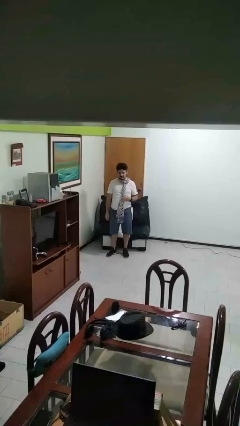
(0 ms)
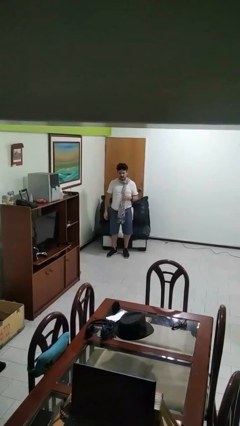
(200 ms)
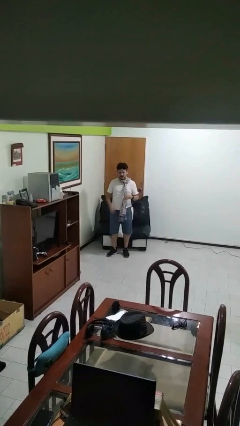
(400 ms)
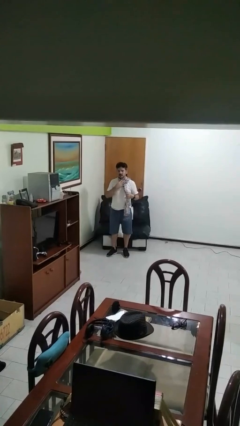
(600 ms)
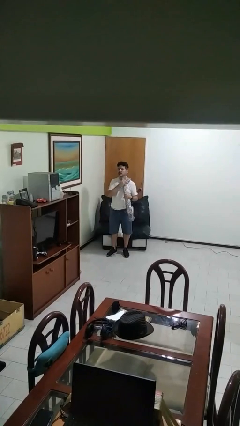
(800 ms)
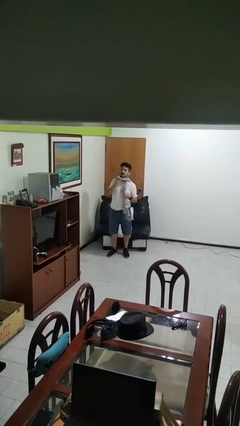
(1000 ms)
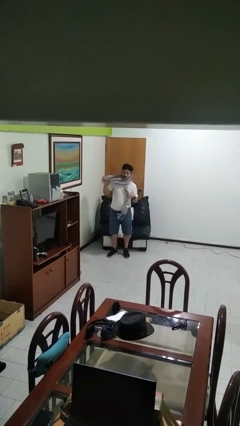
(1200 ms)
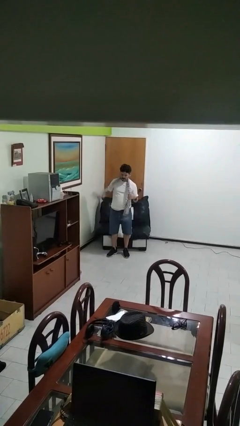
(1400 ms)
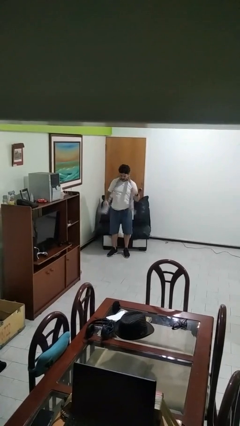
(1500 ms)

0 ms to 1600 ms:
person takes off scarf

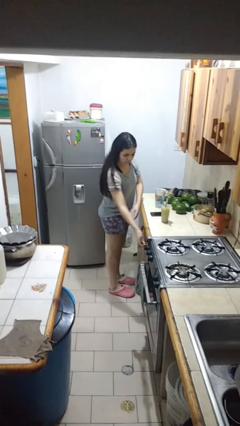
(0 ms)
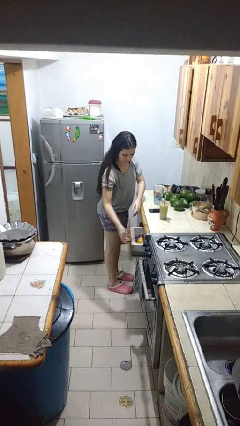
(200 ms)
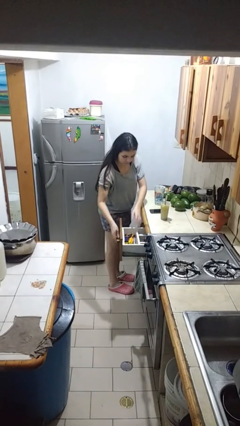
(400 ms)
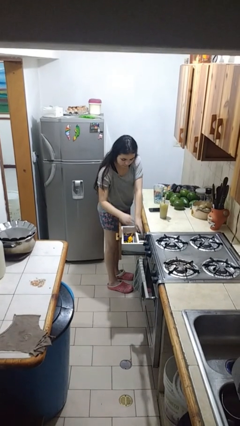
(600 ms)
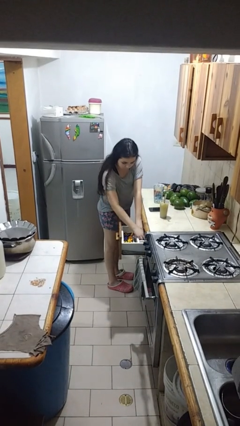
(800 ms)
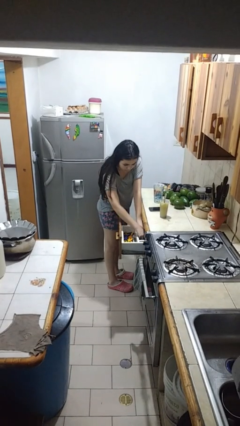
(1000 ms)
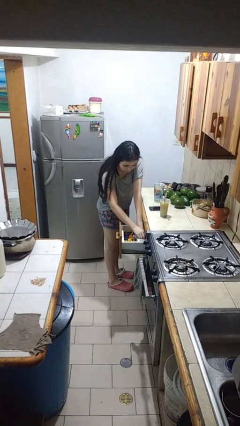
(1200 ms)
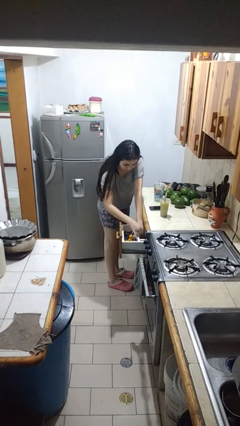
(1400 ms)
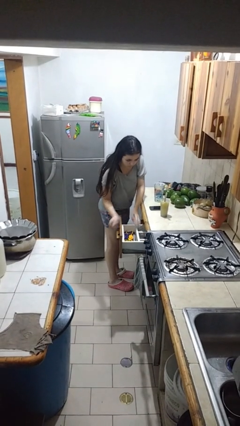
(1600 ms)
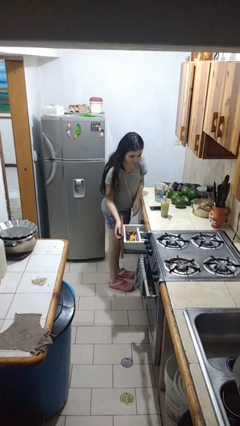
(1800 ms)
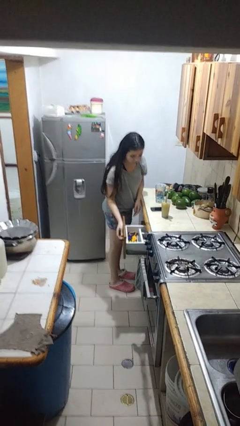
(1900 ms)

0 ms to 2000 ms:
person searches in kitchen drawer

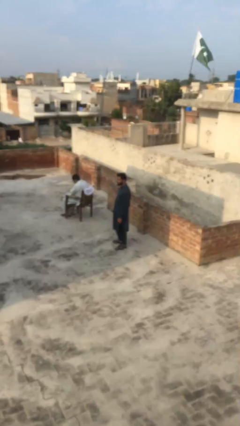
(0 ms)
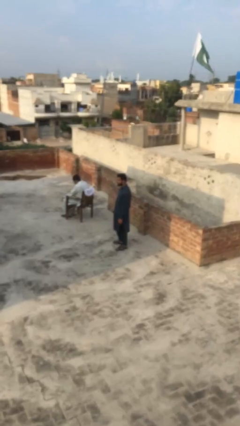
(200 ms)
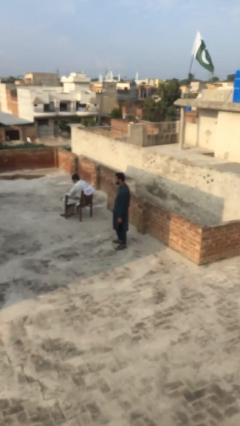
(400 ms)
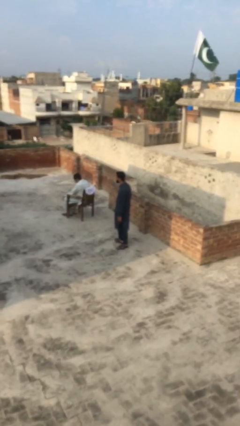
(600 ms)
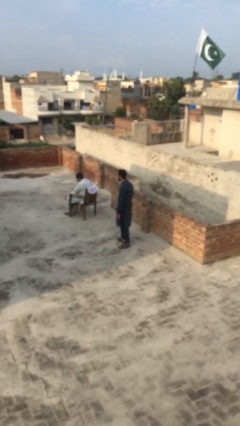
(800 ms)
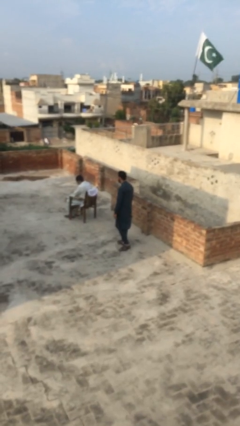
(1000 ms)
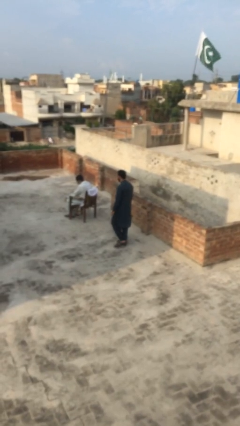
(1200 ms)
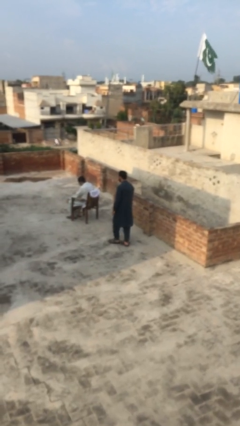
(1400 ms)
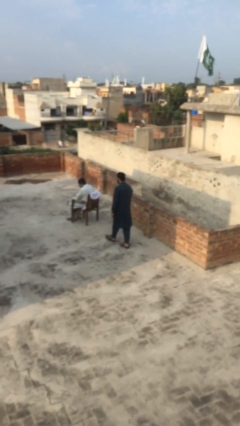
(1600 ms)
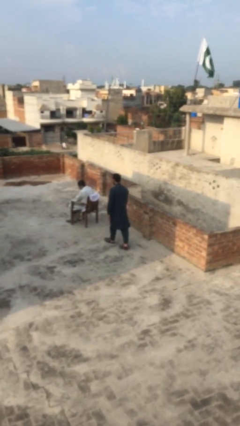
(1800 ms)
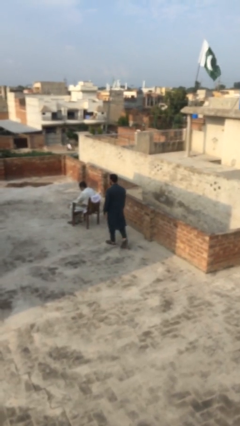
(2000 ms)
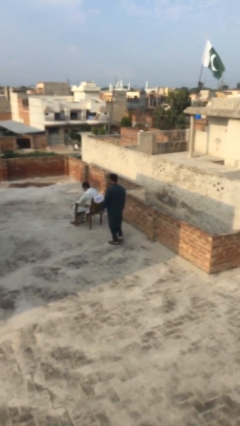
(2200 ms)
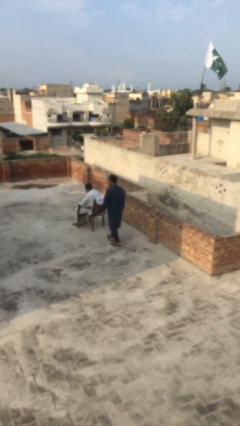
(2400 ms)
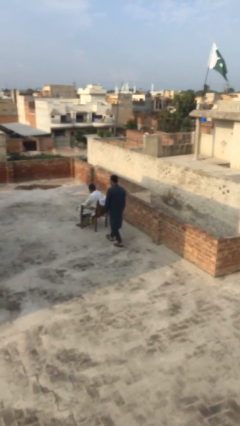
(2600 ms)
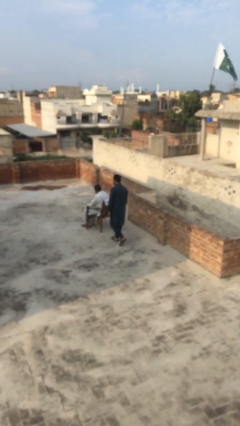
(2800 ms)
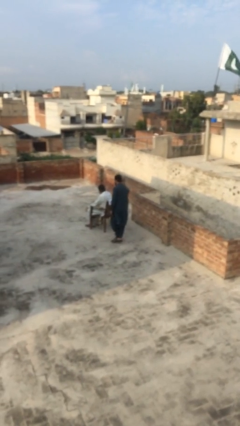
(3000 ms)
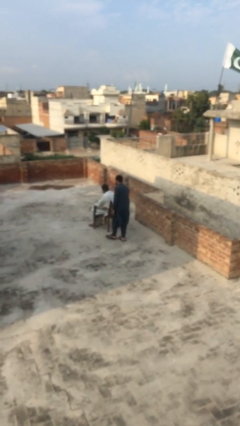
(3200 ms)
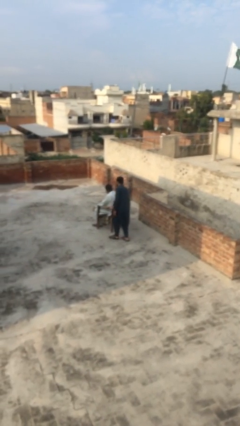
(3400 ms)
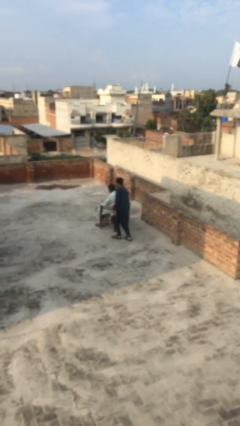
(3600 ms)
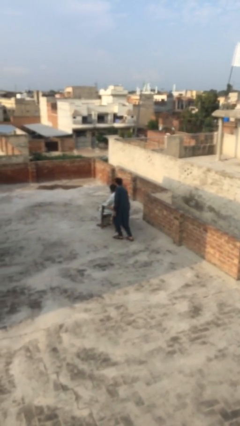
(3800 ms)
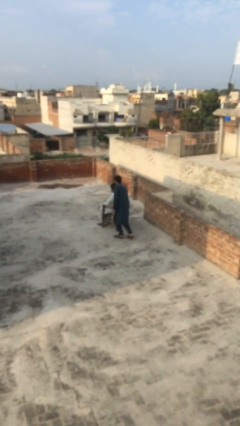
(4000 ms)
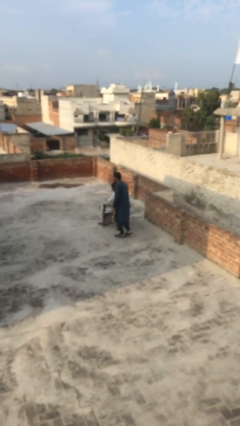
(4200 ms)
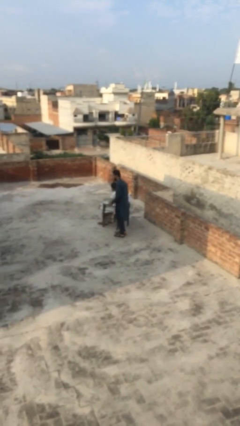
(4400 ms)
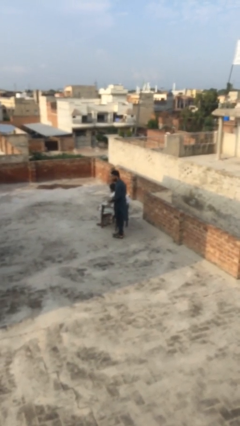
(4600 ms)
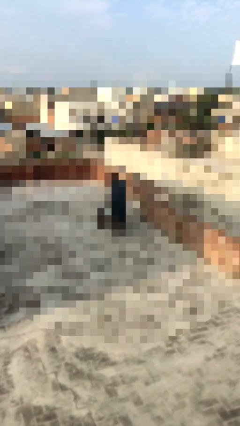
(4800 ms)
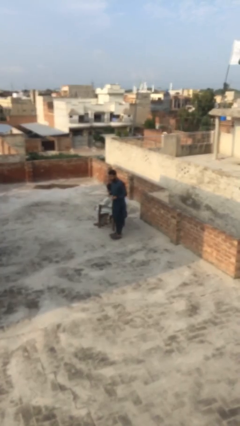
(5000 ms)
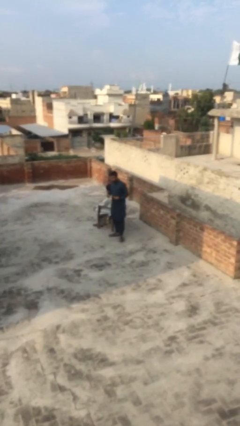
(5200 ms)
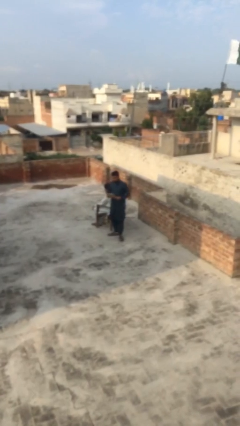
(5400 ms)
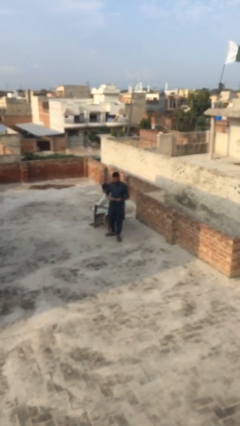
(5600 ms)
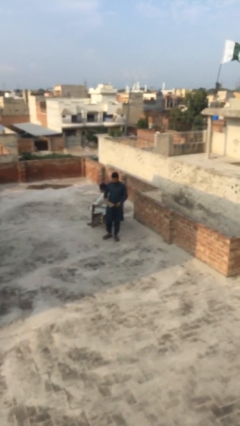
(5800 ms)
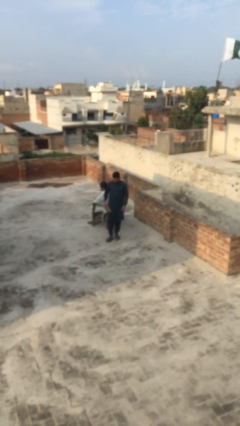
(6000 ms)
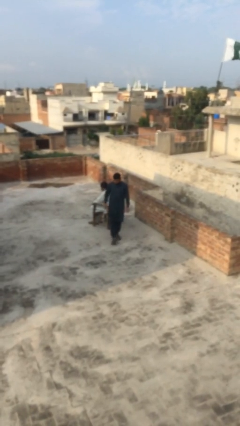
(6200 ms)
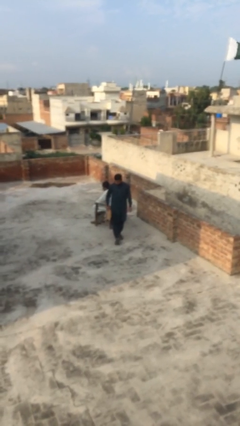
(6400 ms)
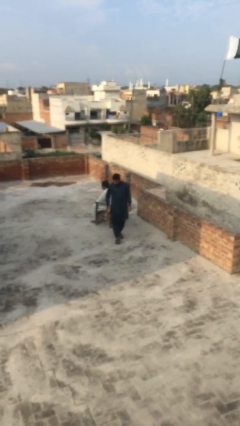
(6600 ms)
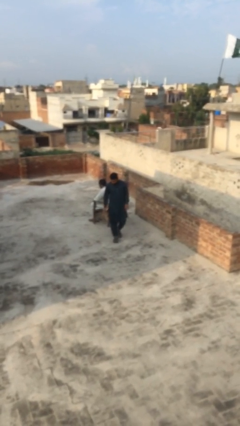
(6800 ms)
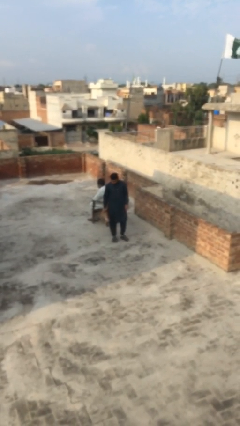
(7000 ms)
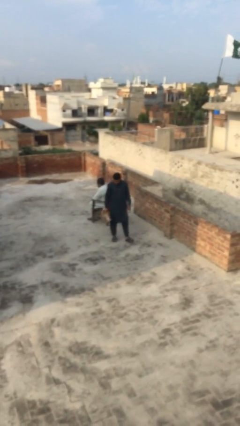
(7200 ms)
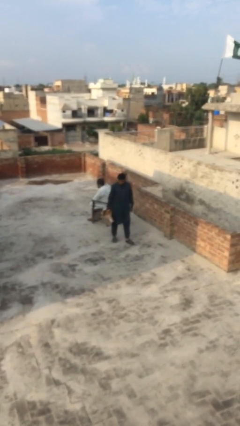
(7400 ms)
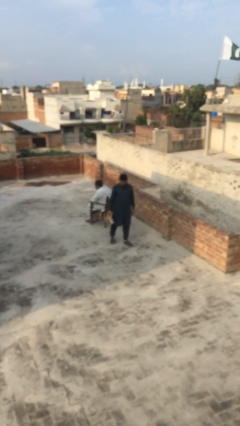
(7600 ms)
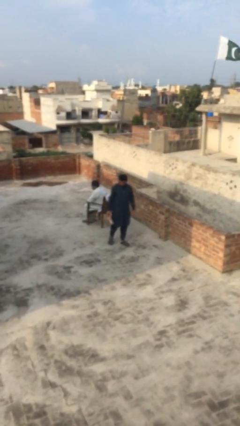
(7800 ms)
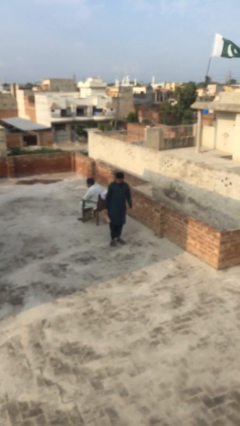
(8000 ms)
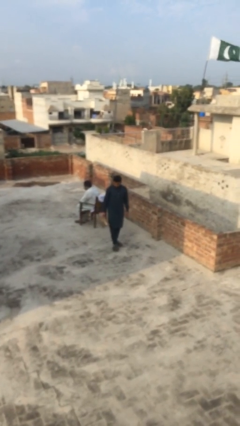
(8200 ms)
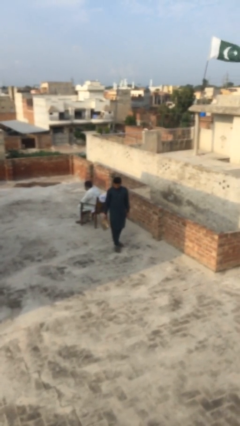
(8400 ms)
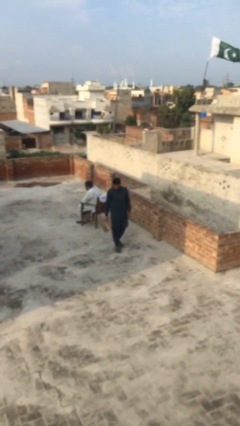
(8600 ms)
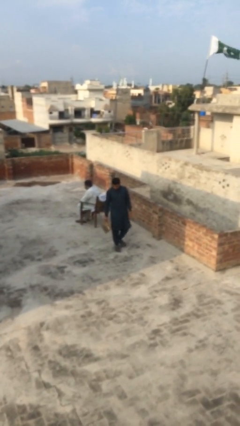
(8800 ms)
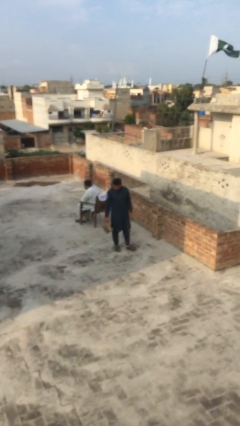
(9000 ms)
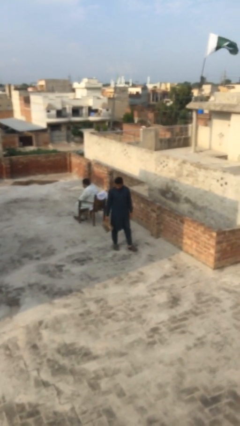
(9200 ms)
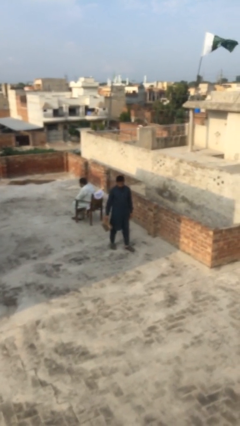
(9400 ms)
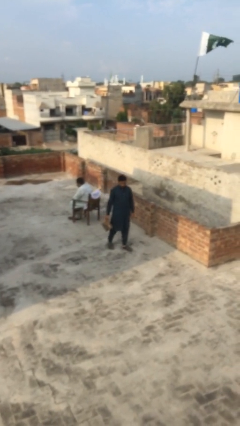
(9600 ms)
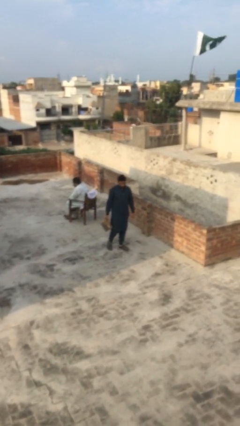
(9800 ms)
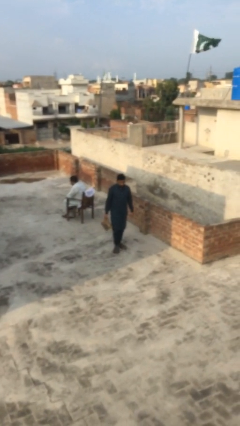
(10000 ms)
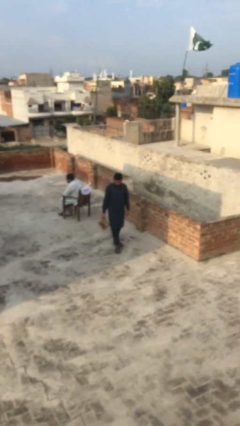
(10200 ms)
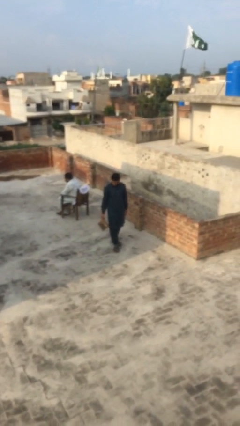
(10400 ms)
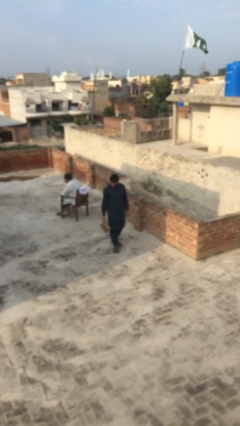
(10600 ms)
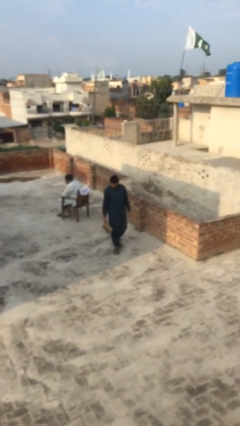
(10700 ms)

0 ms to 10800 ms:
person steals object from person

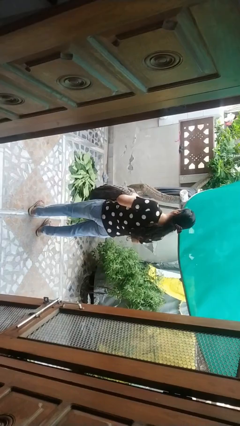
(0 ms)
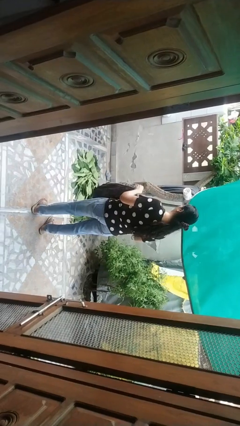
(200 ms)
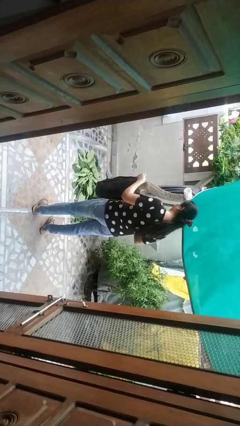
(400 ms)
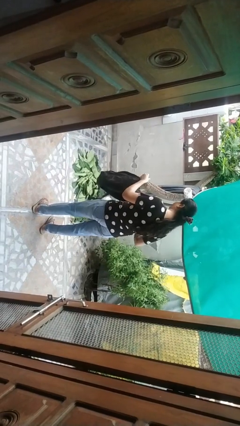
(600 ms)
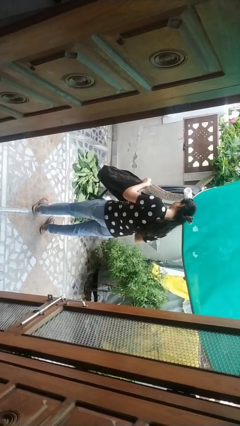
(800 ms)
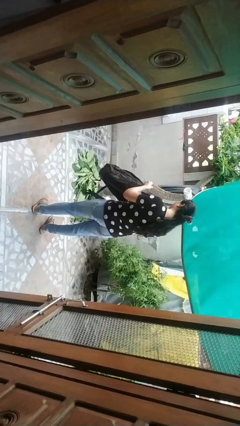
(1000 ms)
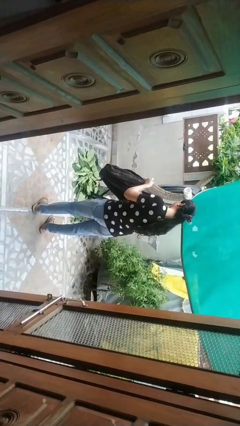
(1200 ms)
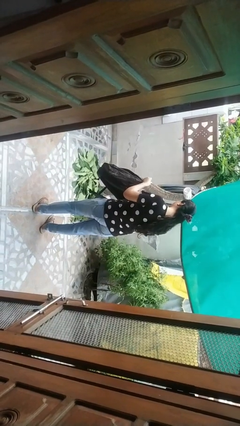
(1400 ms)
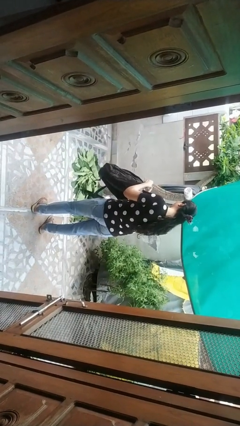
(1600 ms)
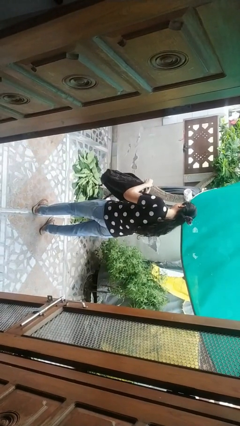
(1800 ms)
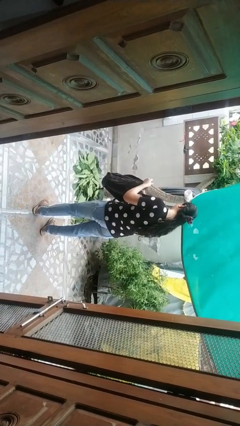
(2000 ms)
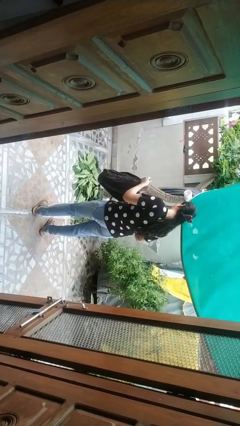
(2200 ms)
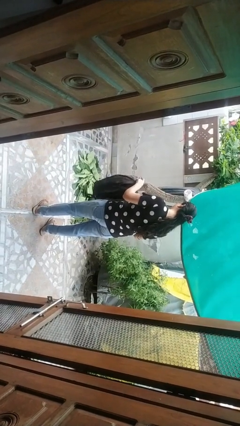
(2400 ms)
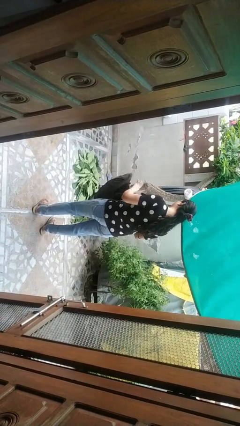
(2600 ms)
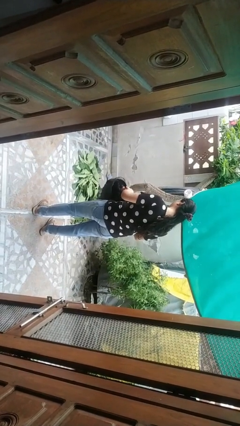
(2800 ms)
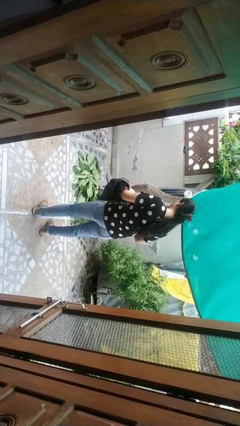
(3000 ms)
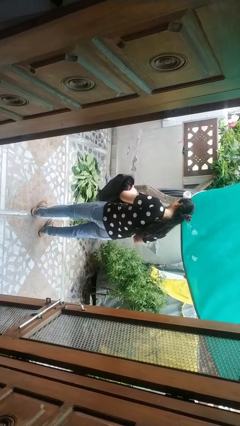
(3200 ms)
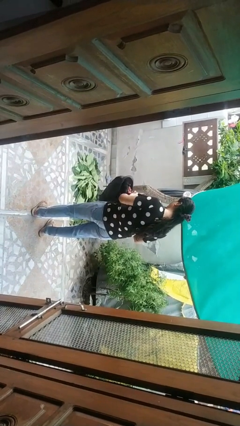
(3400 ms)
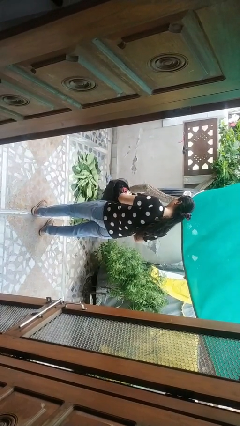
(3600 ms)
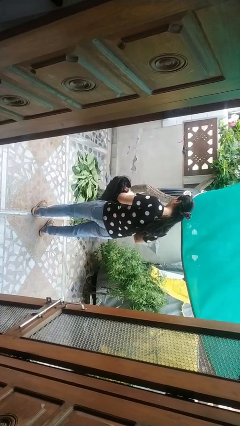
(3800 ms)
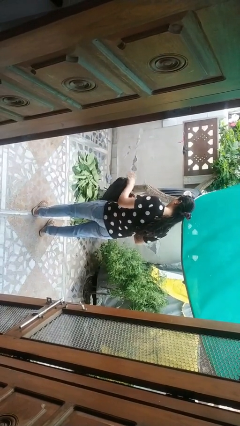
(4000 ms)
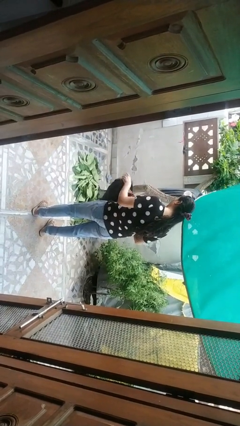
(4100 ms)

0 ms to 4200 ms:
person searches in backpack
